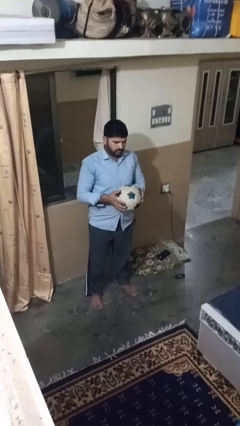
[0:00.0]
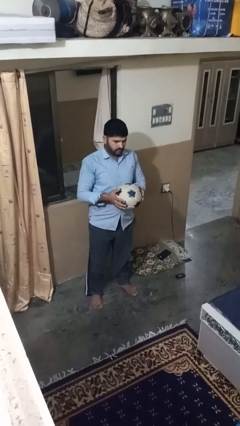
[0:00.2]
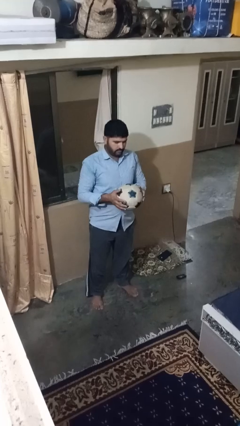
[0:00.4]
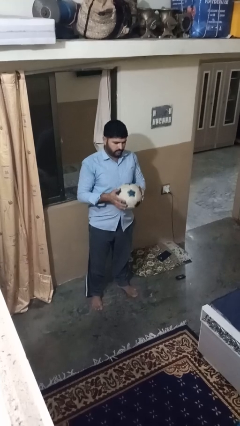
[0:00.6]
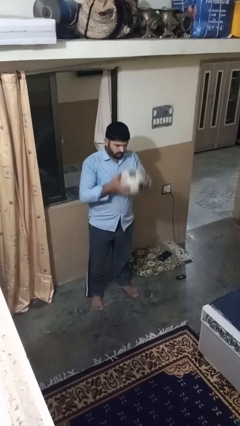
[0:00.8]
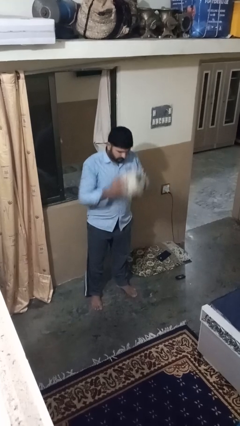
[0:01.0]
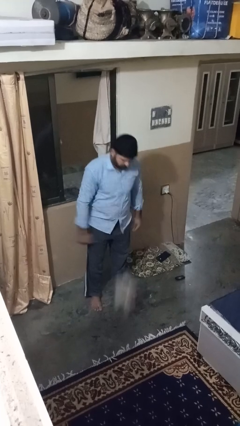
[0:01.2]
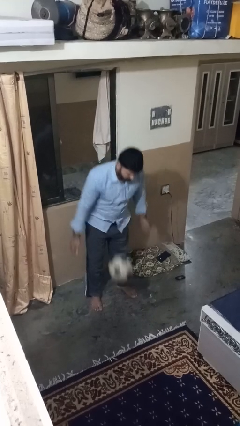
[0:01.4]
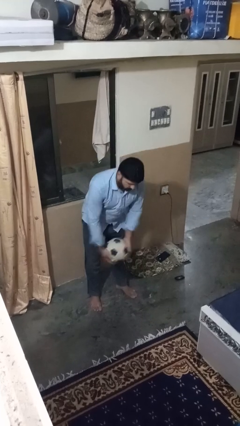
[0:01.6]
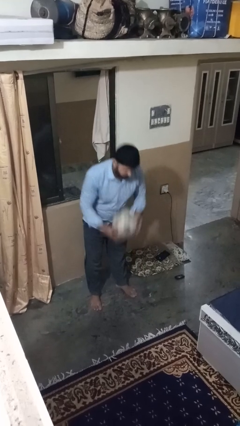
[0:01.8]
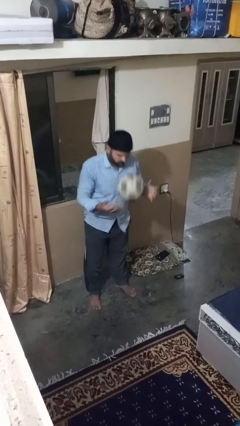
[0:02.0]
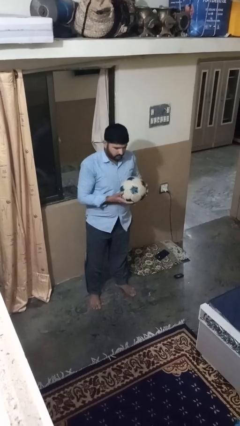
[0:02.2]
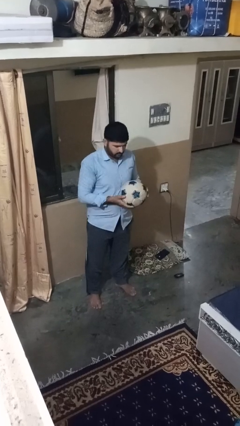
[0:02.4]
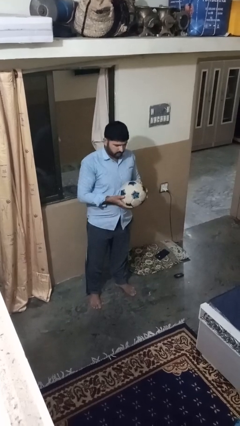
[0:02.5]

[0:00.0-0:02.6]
person bounces ball on floor

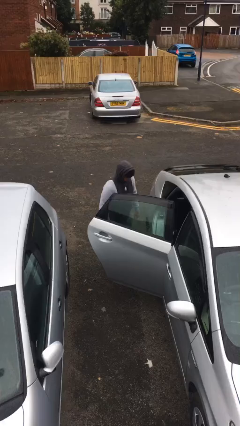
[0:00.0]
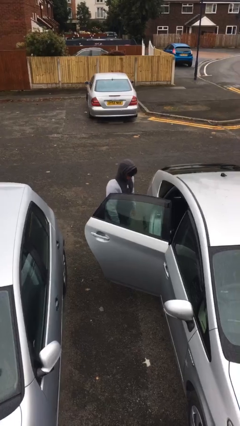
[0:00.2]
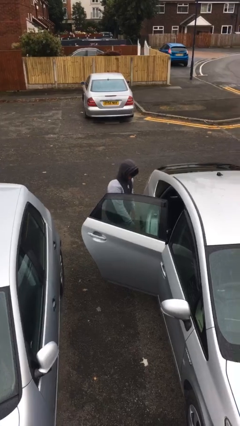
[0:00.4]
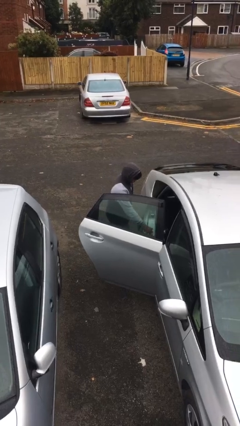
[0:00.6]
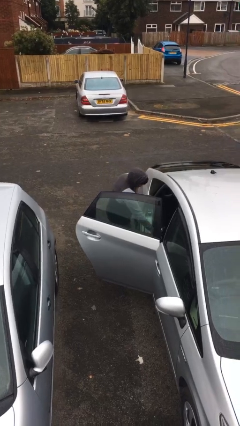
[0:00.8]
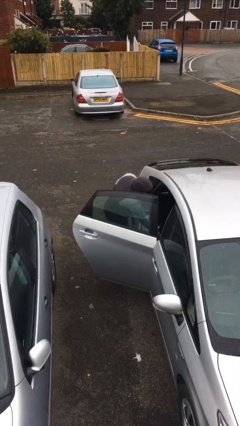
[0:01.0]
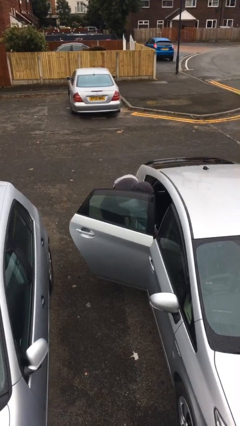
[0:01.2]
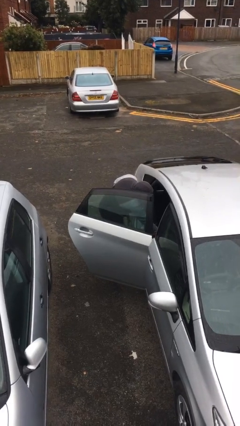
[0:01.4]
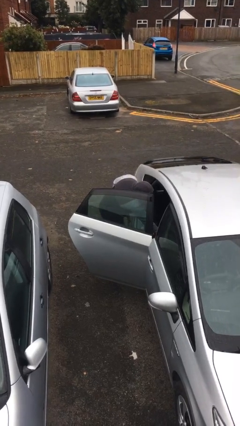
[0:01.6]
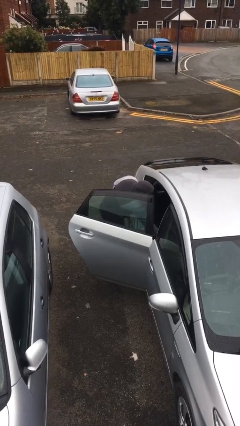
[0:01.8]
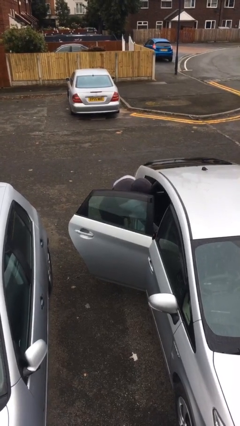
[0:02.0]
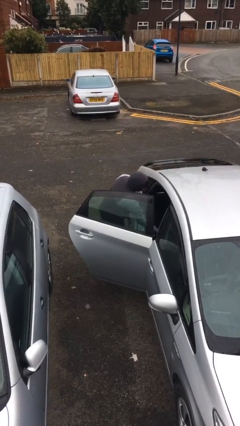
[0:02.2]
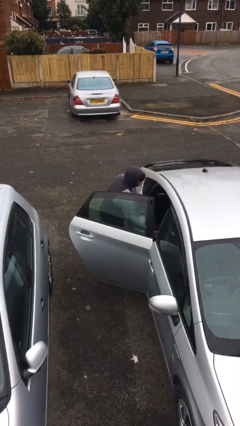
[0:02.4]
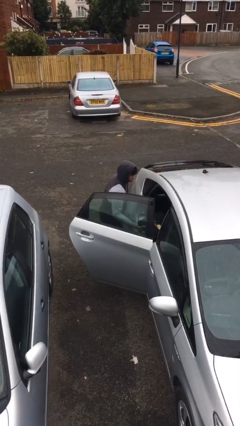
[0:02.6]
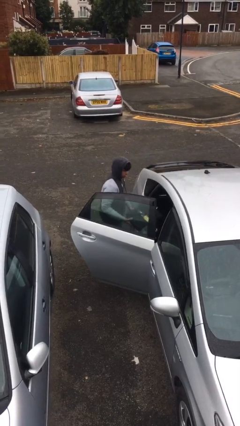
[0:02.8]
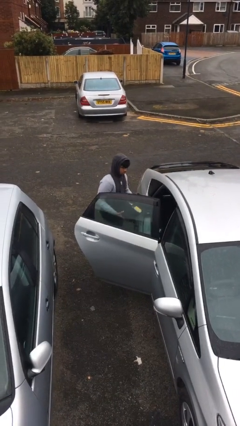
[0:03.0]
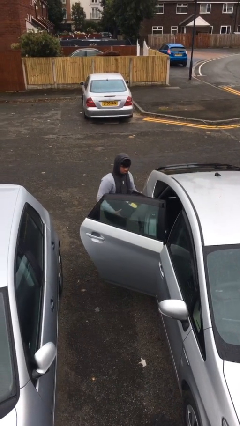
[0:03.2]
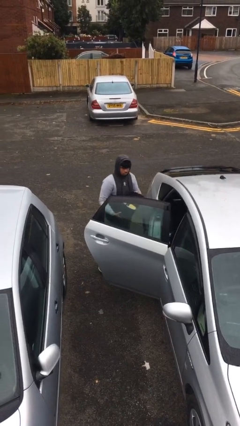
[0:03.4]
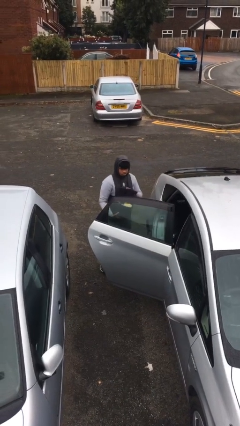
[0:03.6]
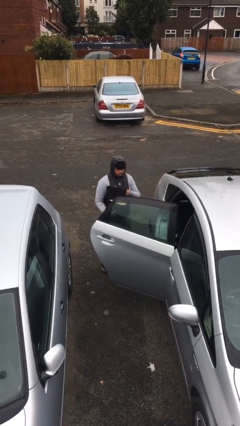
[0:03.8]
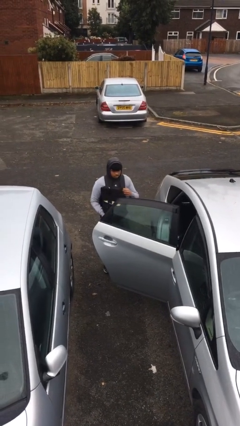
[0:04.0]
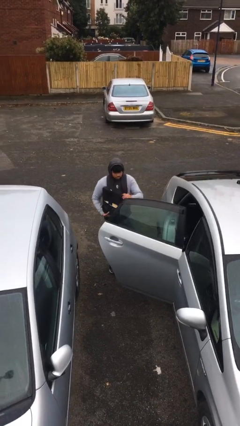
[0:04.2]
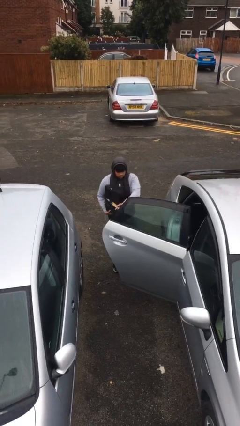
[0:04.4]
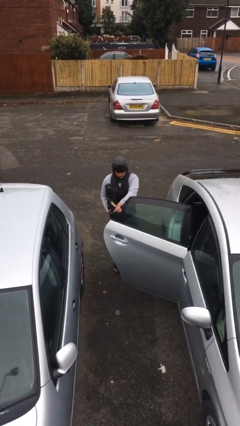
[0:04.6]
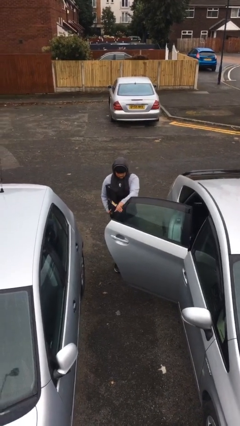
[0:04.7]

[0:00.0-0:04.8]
person unloads car

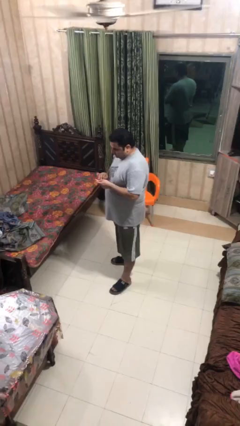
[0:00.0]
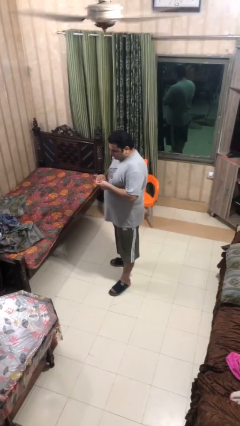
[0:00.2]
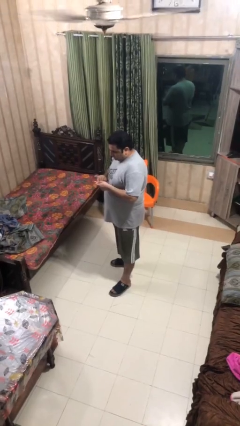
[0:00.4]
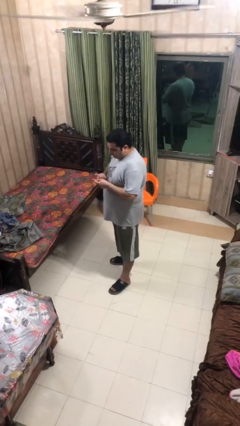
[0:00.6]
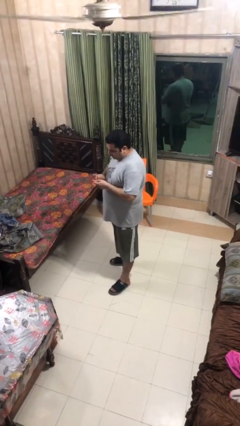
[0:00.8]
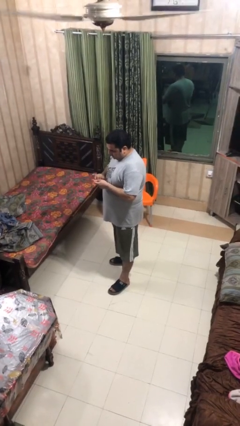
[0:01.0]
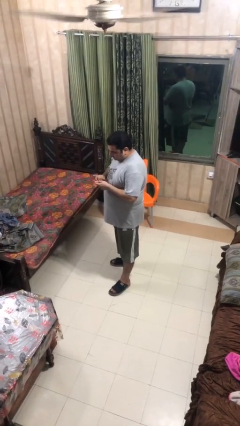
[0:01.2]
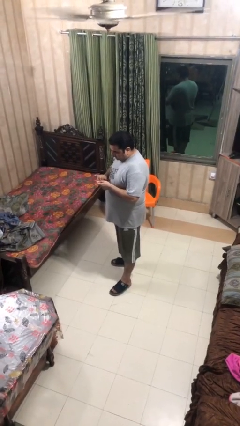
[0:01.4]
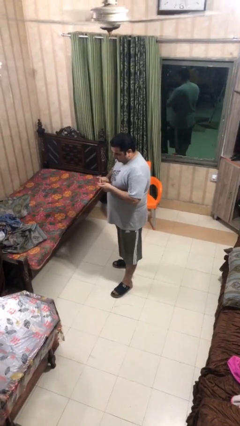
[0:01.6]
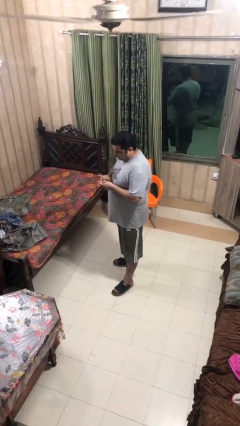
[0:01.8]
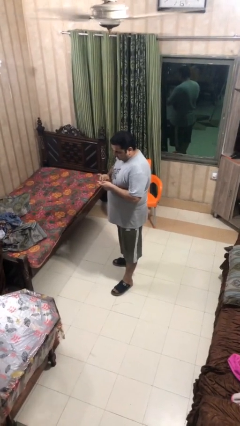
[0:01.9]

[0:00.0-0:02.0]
person files fingernails

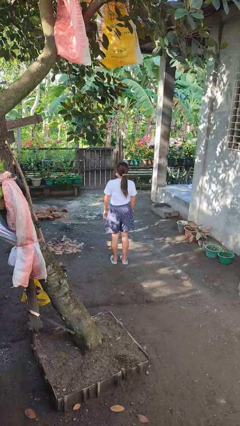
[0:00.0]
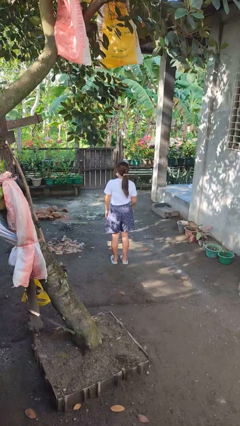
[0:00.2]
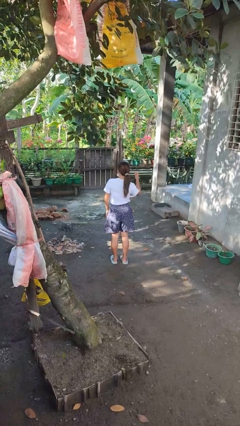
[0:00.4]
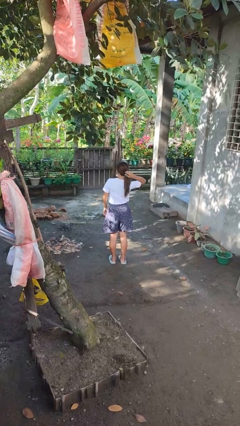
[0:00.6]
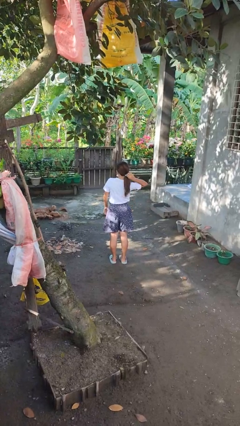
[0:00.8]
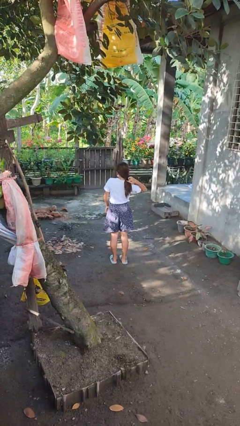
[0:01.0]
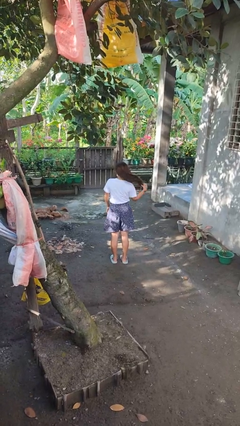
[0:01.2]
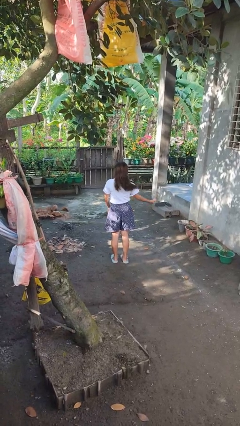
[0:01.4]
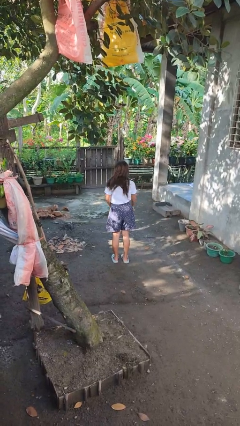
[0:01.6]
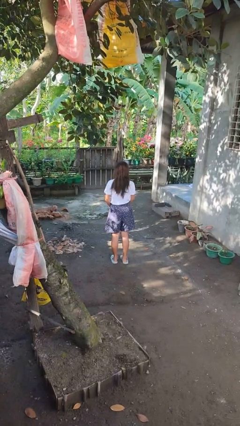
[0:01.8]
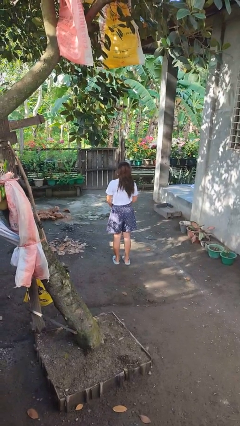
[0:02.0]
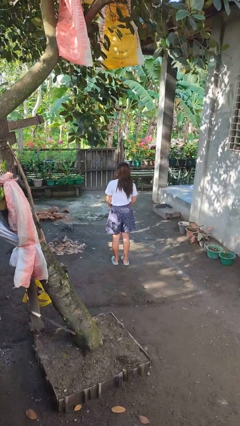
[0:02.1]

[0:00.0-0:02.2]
person takes off hairtie

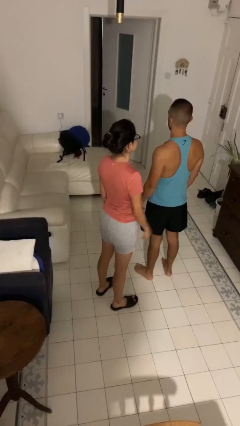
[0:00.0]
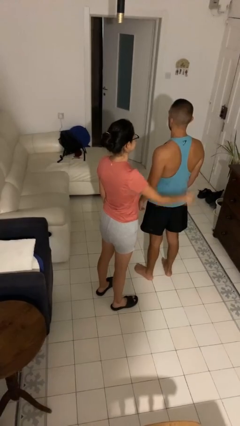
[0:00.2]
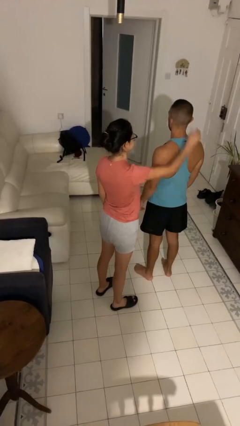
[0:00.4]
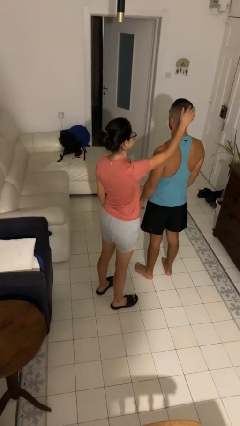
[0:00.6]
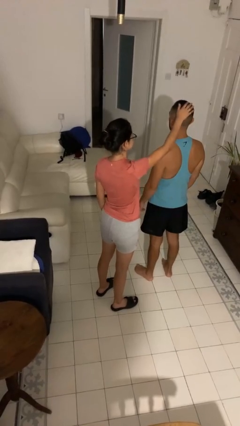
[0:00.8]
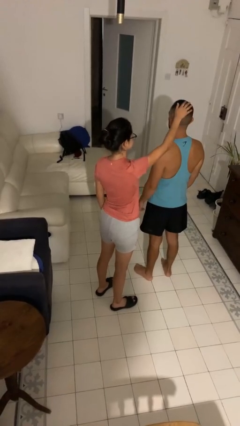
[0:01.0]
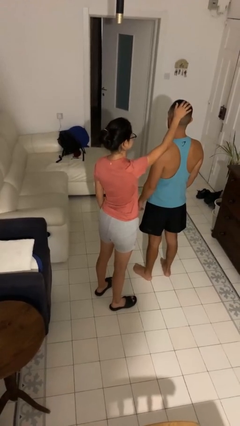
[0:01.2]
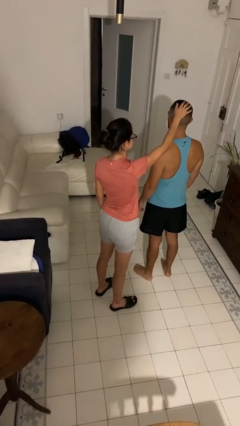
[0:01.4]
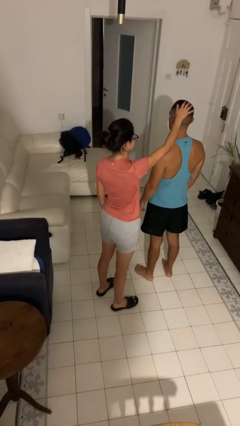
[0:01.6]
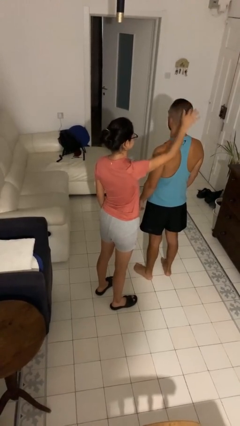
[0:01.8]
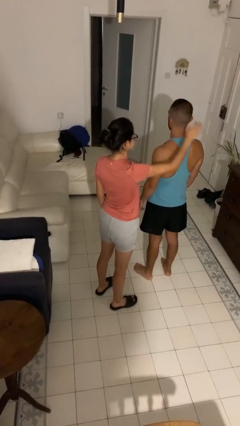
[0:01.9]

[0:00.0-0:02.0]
person grabs person by hair

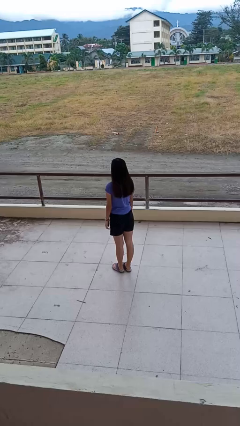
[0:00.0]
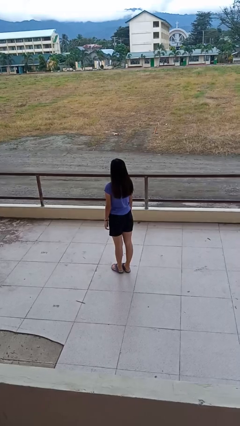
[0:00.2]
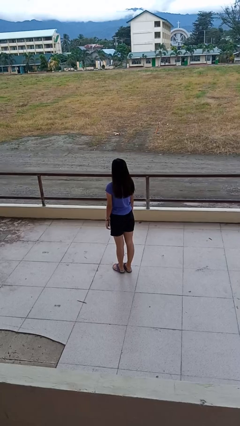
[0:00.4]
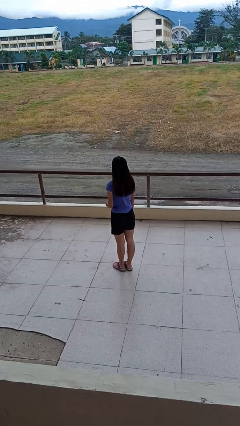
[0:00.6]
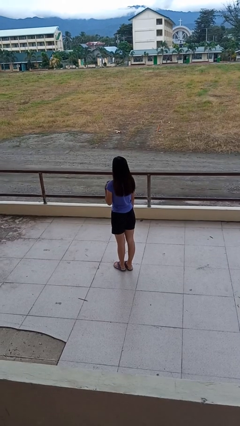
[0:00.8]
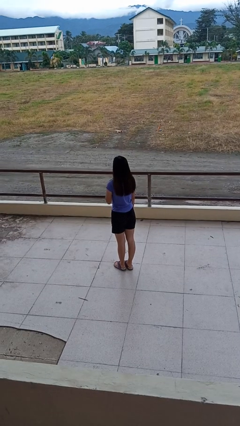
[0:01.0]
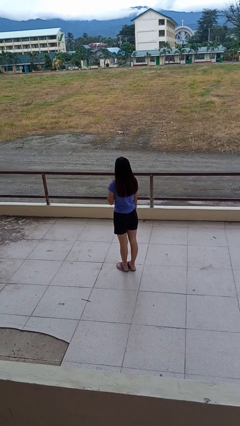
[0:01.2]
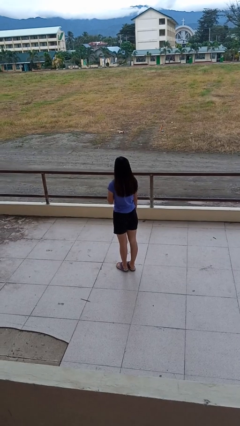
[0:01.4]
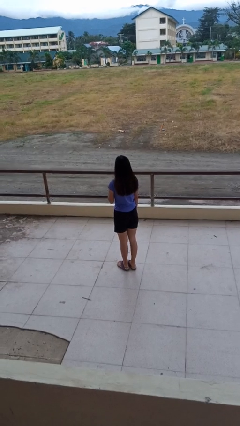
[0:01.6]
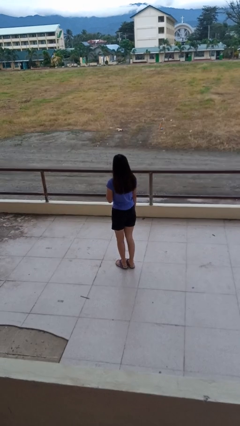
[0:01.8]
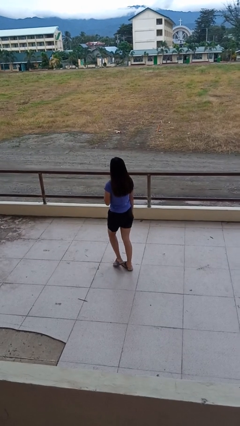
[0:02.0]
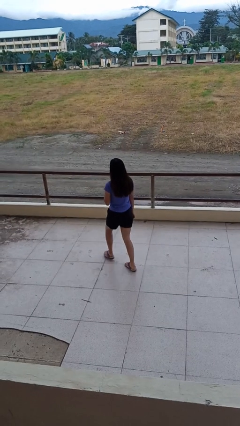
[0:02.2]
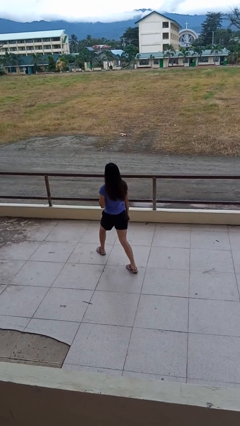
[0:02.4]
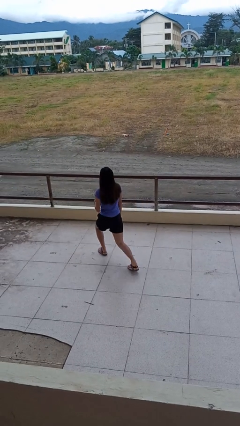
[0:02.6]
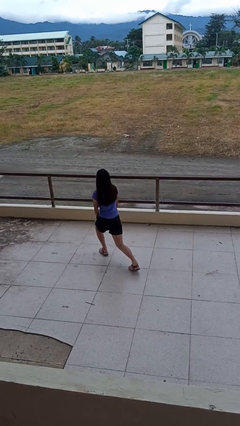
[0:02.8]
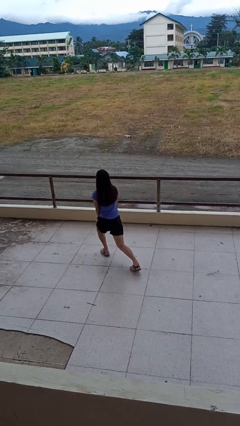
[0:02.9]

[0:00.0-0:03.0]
person exercises with lunges

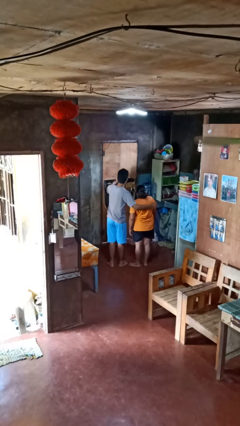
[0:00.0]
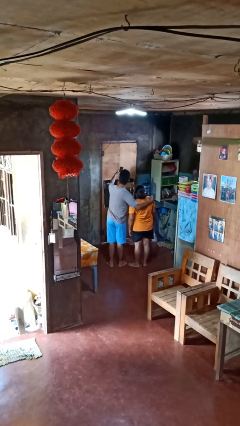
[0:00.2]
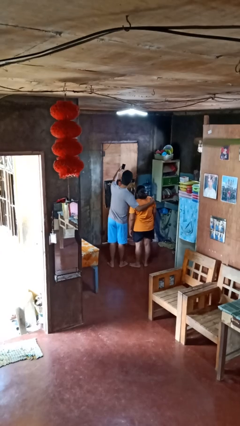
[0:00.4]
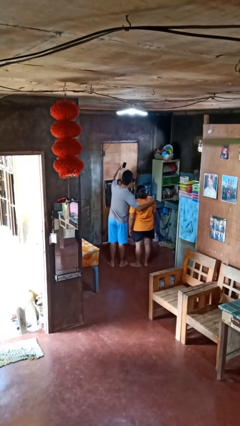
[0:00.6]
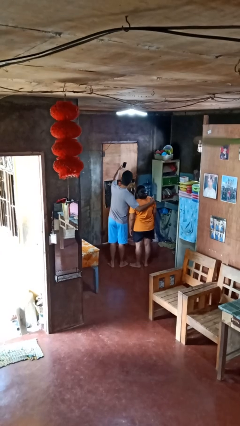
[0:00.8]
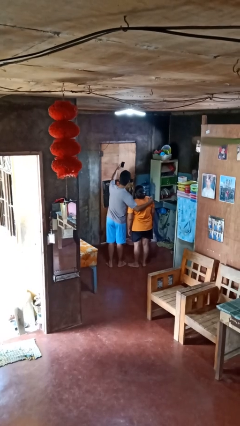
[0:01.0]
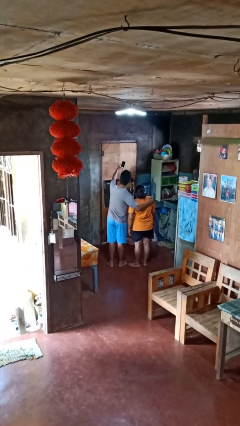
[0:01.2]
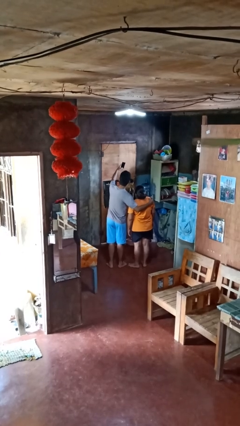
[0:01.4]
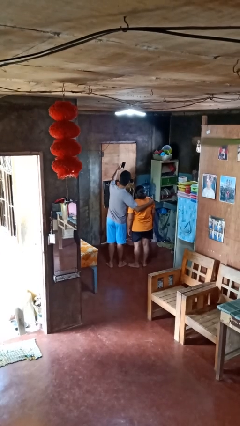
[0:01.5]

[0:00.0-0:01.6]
person takes selfie with person
